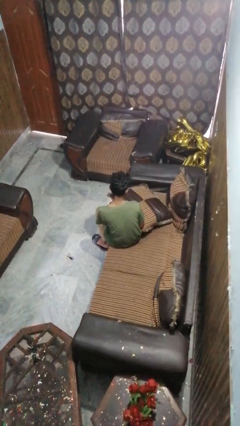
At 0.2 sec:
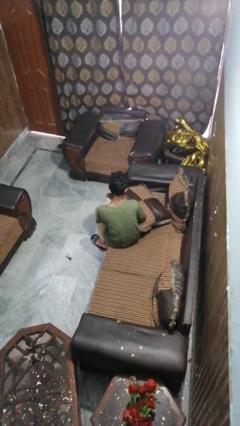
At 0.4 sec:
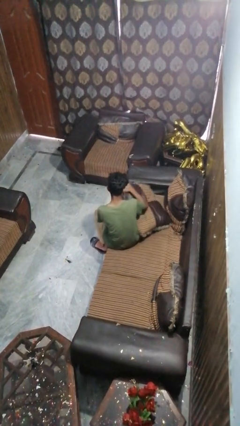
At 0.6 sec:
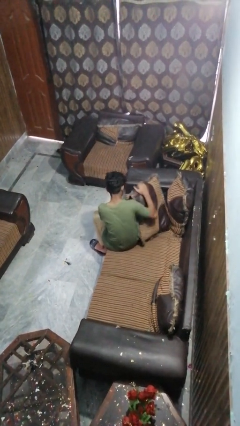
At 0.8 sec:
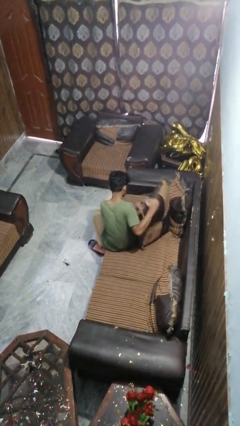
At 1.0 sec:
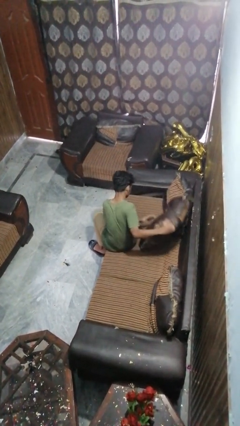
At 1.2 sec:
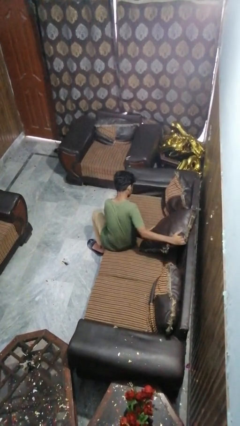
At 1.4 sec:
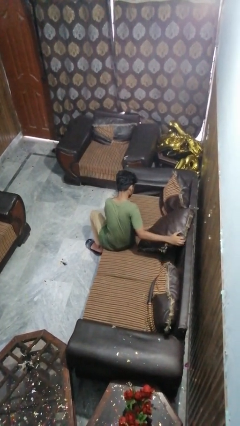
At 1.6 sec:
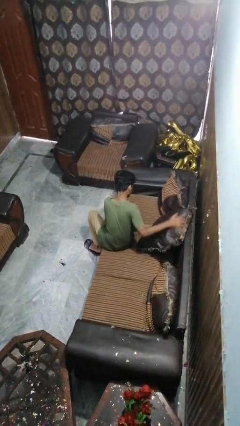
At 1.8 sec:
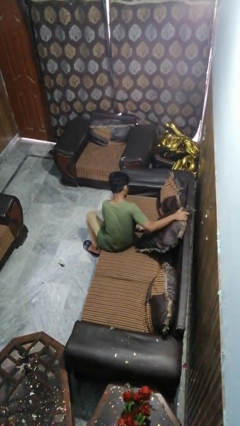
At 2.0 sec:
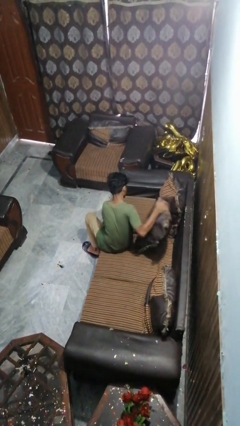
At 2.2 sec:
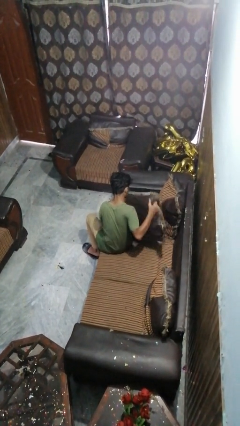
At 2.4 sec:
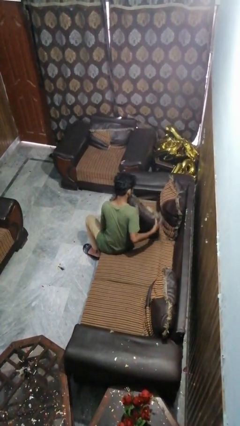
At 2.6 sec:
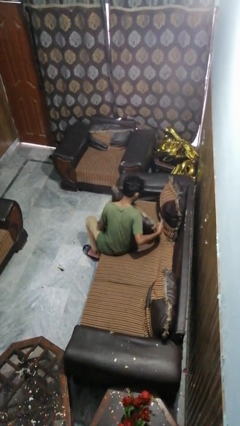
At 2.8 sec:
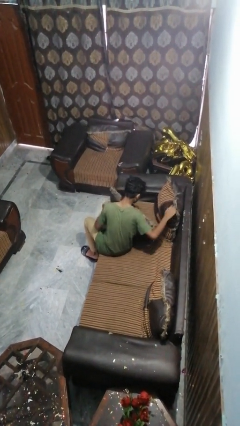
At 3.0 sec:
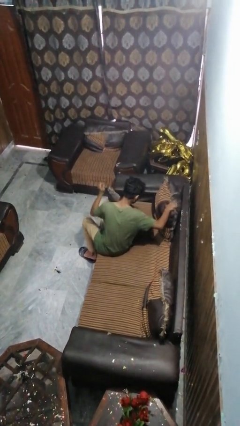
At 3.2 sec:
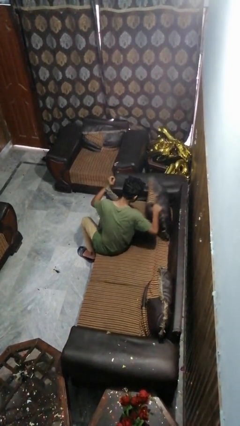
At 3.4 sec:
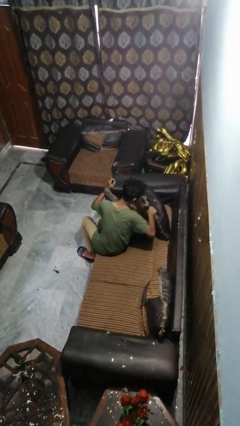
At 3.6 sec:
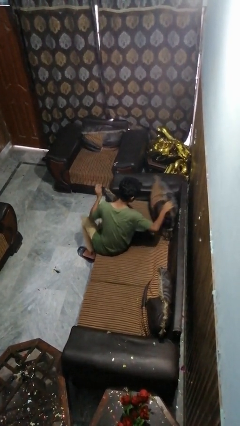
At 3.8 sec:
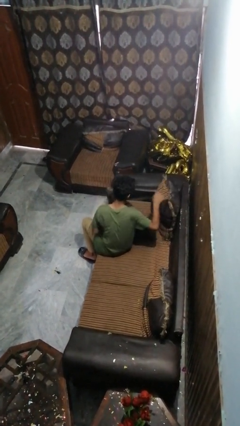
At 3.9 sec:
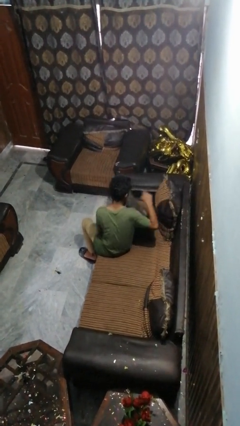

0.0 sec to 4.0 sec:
person searches in couch

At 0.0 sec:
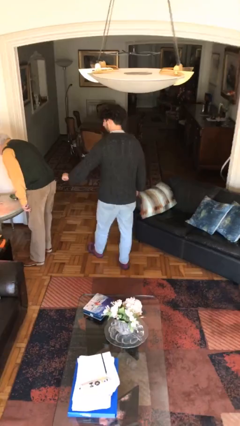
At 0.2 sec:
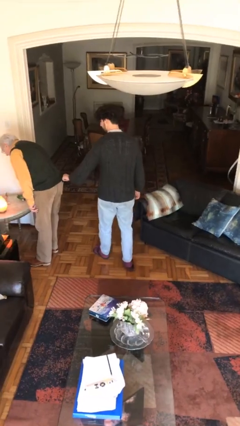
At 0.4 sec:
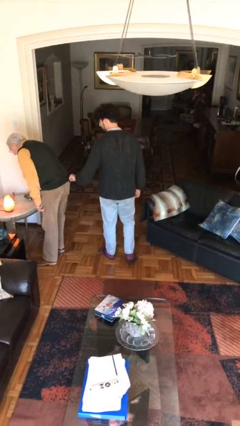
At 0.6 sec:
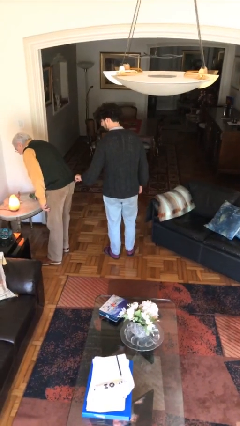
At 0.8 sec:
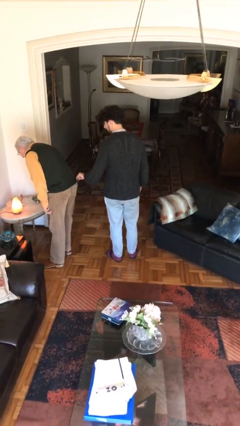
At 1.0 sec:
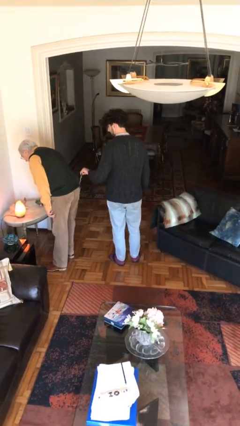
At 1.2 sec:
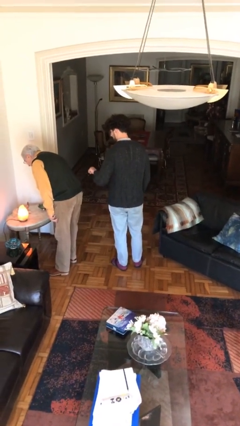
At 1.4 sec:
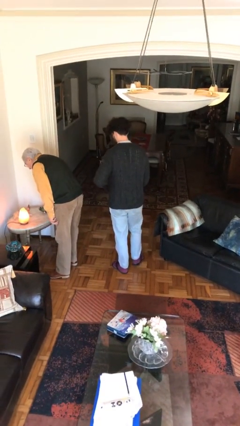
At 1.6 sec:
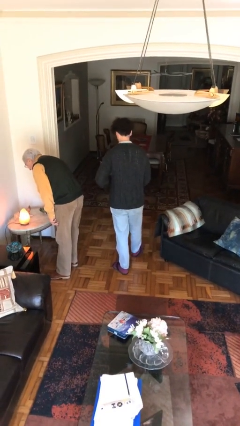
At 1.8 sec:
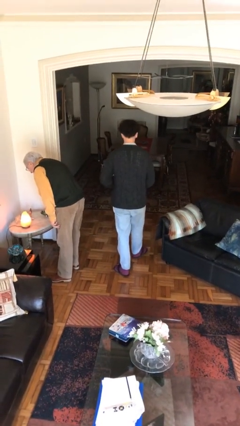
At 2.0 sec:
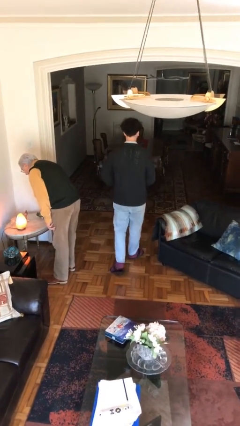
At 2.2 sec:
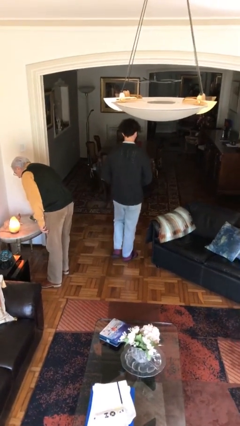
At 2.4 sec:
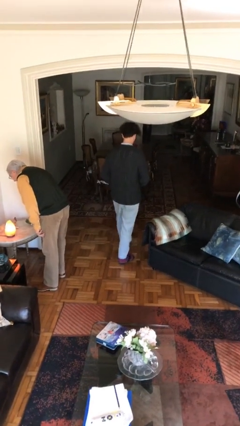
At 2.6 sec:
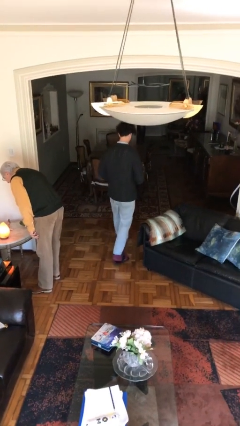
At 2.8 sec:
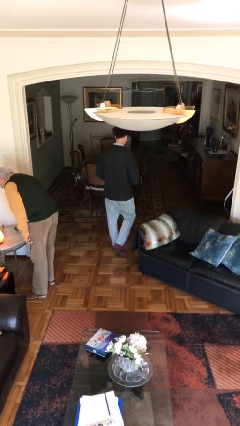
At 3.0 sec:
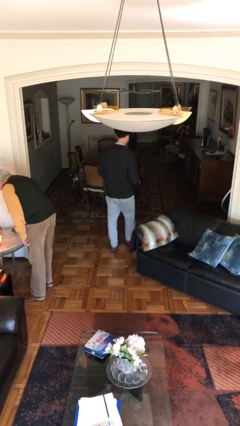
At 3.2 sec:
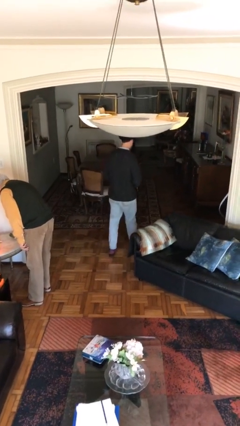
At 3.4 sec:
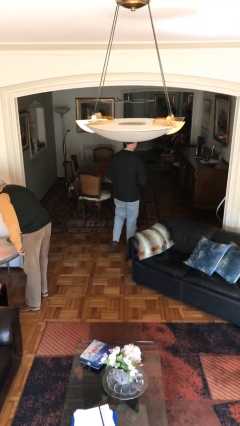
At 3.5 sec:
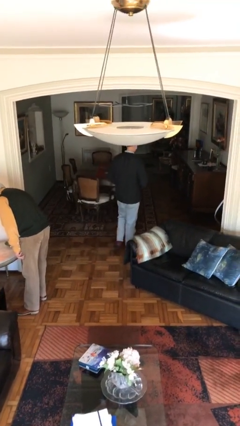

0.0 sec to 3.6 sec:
person steals object from person

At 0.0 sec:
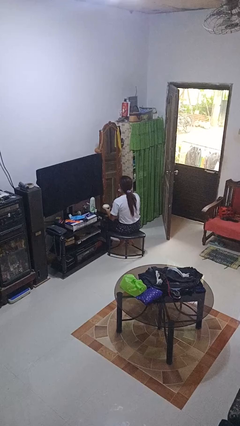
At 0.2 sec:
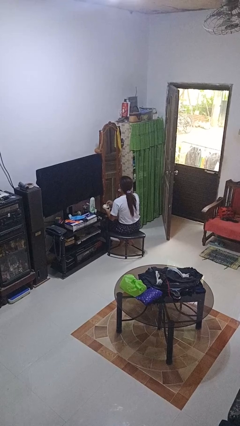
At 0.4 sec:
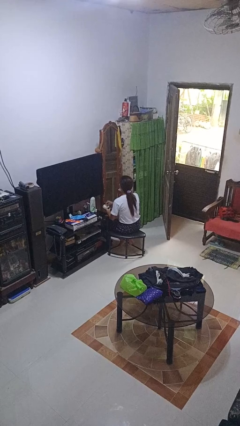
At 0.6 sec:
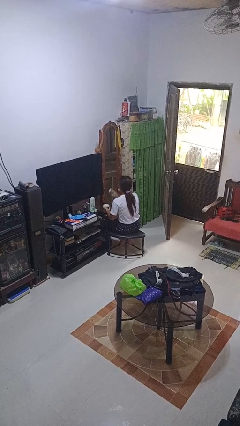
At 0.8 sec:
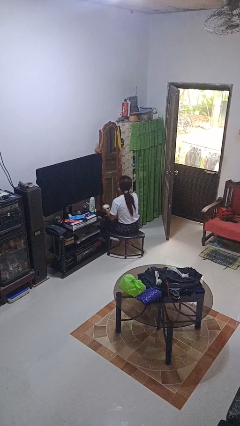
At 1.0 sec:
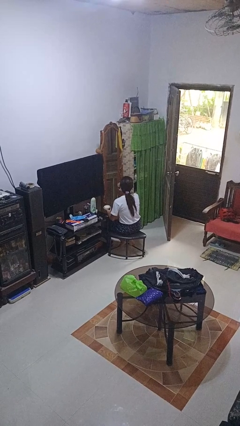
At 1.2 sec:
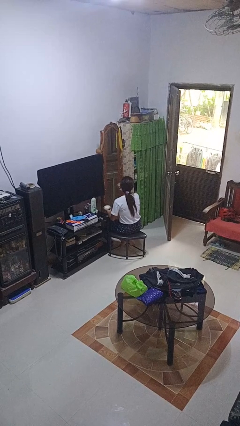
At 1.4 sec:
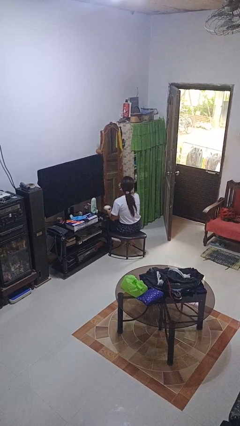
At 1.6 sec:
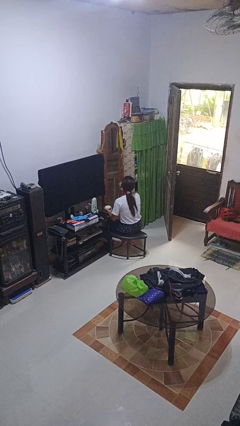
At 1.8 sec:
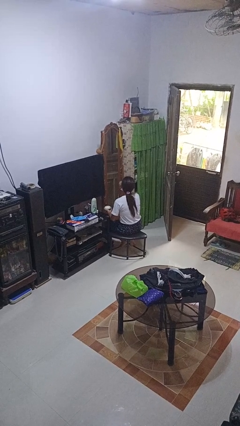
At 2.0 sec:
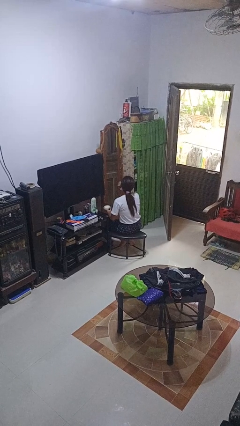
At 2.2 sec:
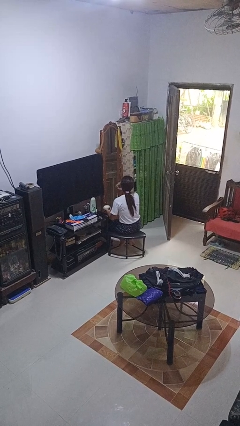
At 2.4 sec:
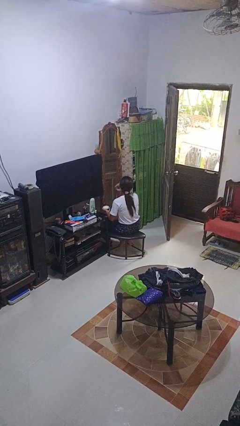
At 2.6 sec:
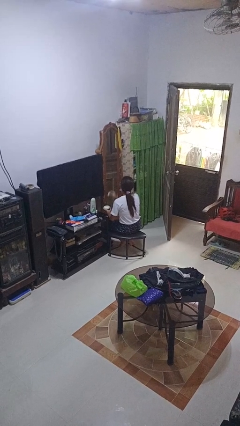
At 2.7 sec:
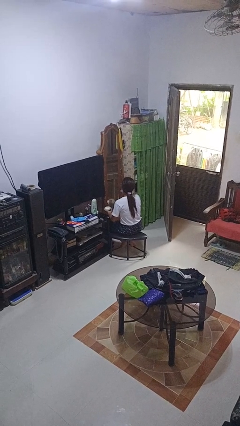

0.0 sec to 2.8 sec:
person applies foundation makeup

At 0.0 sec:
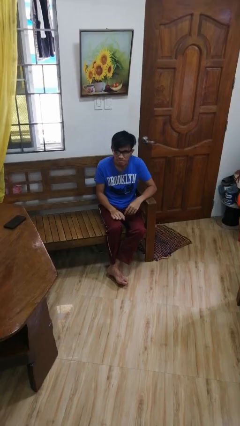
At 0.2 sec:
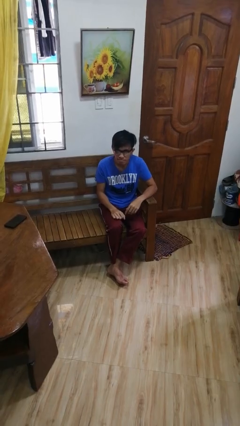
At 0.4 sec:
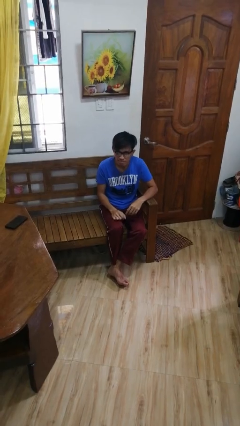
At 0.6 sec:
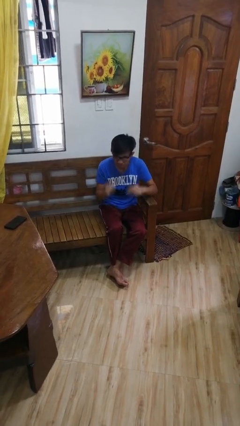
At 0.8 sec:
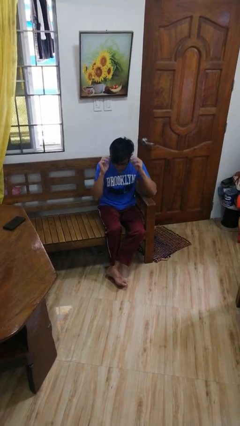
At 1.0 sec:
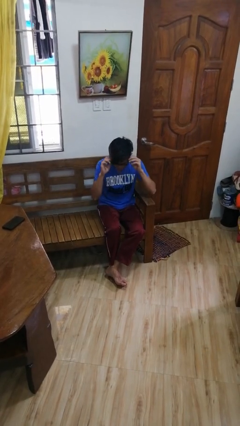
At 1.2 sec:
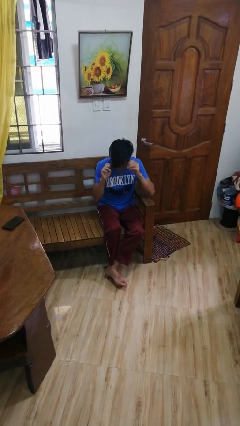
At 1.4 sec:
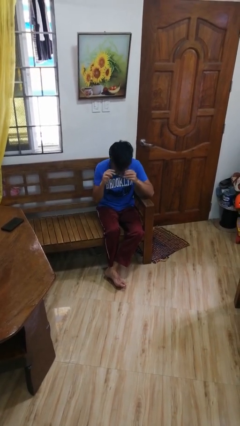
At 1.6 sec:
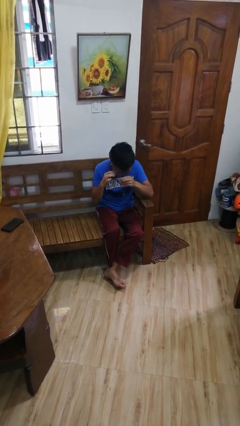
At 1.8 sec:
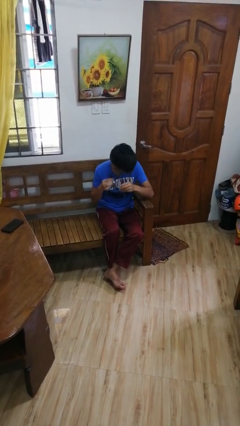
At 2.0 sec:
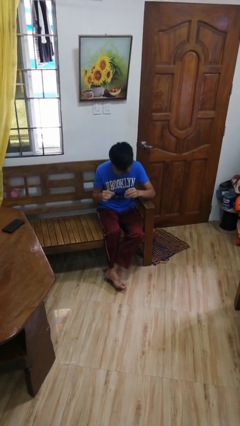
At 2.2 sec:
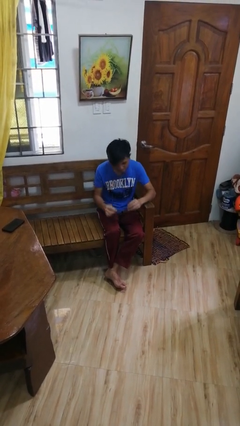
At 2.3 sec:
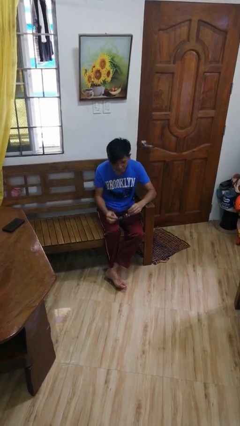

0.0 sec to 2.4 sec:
person takes off glasses

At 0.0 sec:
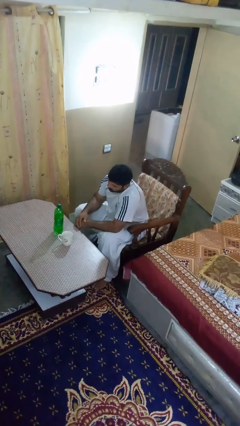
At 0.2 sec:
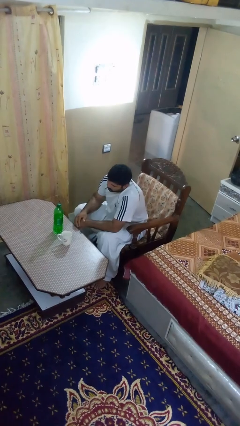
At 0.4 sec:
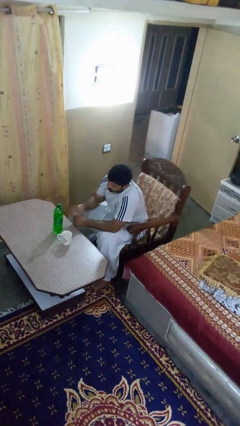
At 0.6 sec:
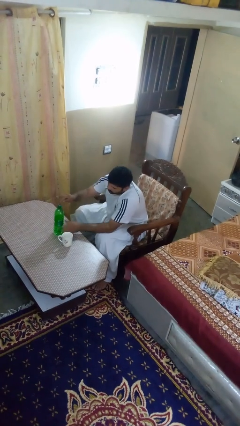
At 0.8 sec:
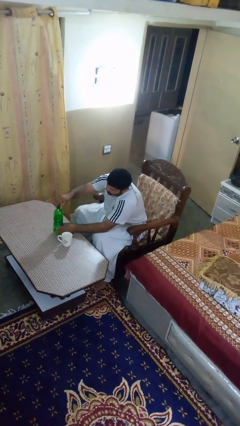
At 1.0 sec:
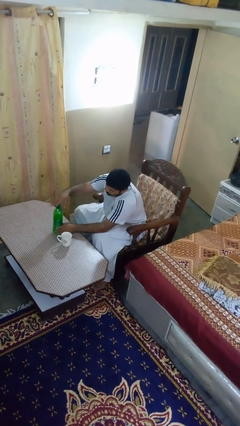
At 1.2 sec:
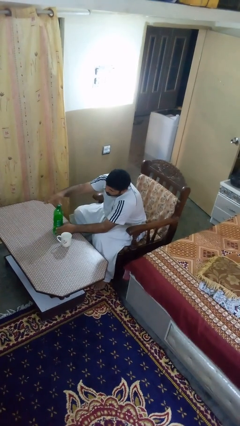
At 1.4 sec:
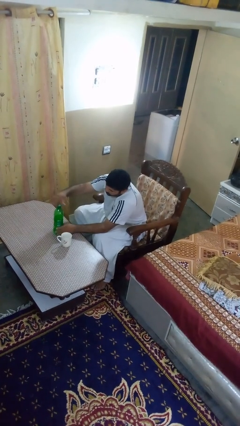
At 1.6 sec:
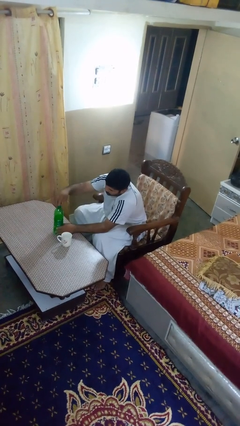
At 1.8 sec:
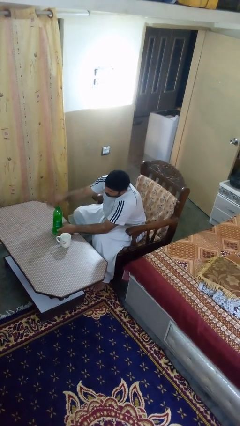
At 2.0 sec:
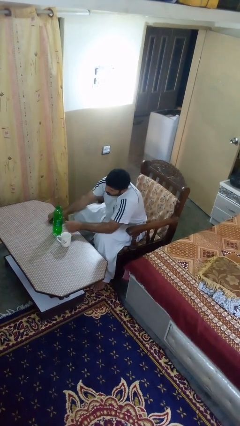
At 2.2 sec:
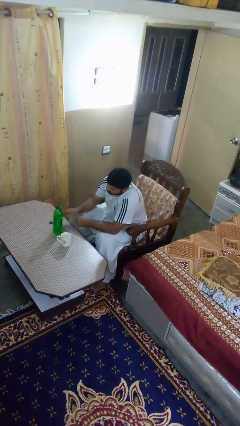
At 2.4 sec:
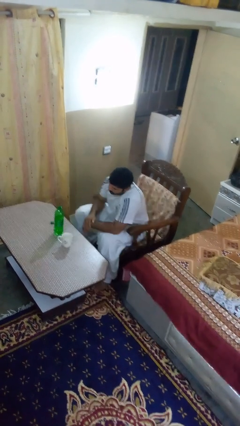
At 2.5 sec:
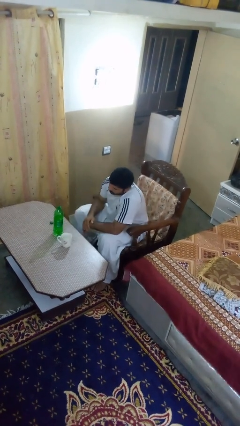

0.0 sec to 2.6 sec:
person unscrews lid from bottle

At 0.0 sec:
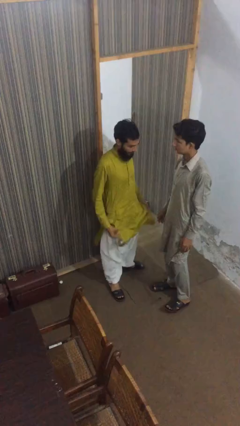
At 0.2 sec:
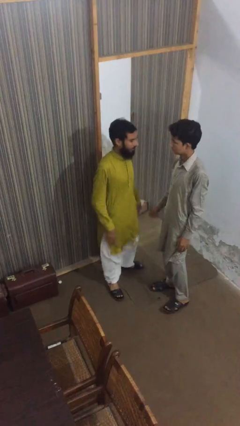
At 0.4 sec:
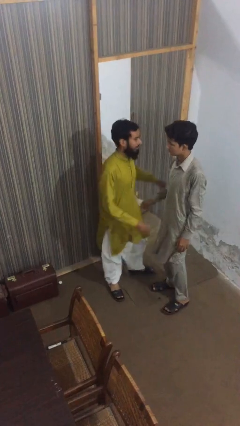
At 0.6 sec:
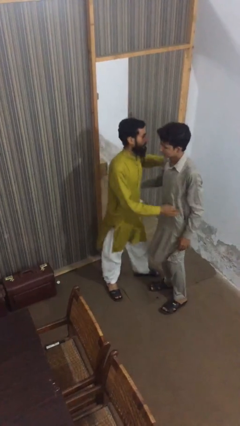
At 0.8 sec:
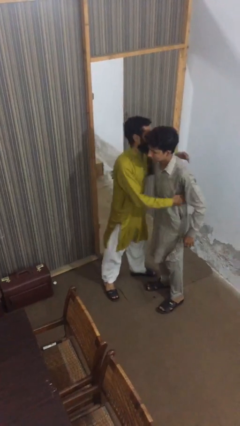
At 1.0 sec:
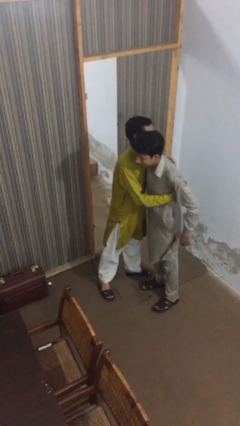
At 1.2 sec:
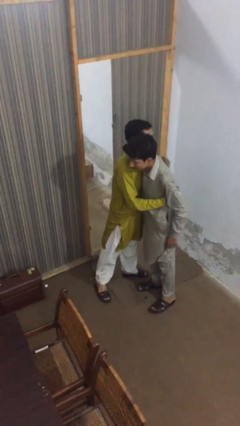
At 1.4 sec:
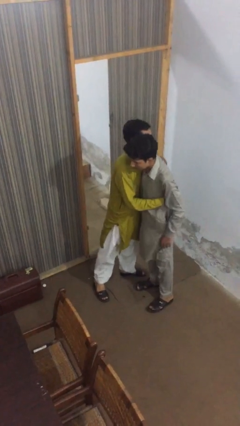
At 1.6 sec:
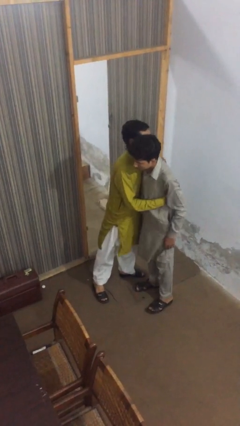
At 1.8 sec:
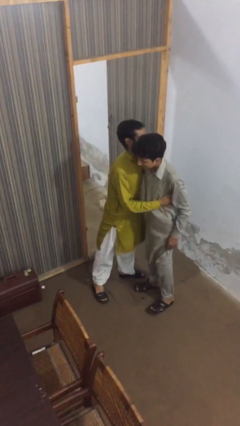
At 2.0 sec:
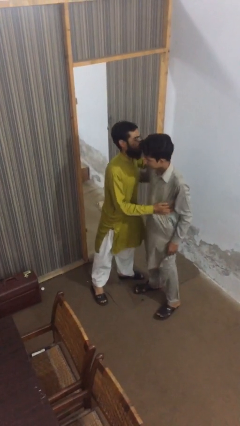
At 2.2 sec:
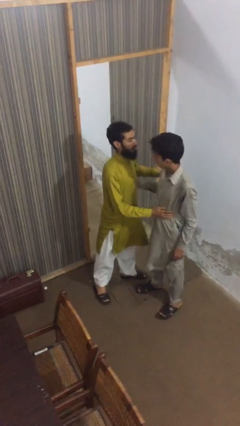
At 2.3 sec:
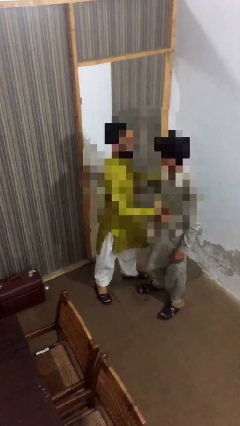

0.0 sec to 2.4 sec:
person embraces person
